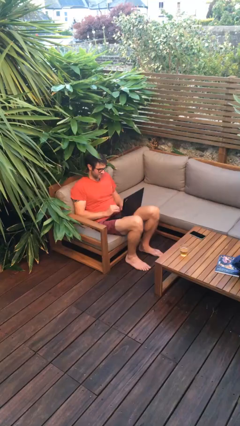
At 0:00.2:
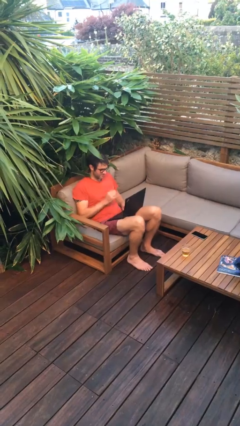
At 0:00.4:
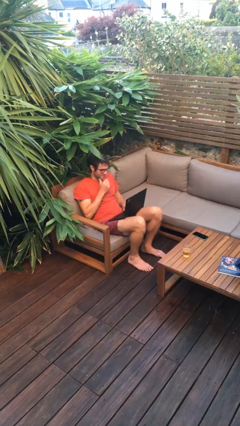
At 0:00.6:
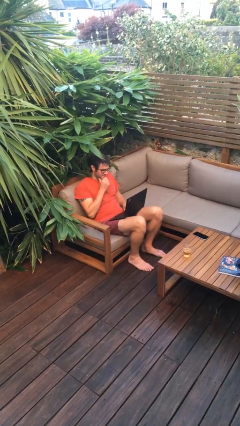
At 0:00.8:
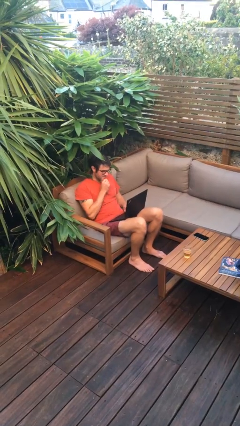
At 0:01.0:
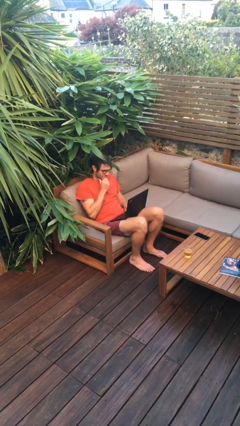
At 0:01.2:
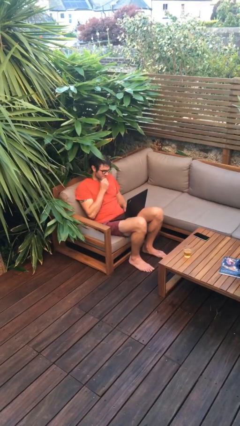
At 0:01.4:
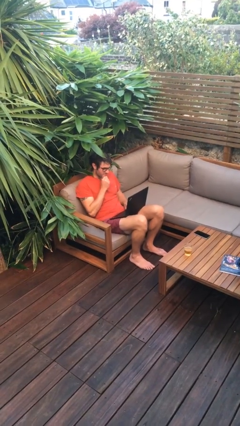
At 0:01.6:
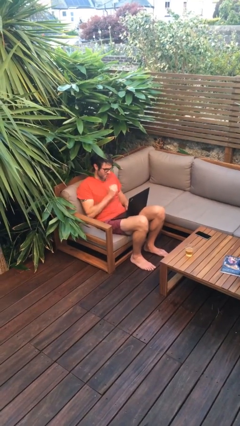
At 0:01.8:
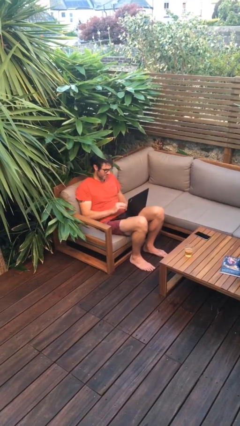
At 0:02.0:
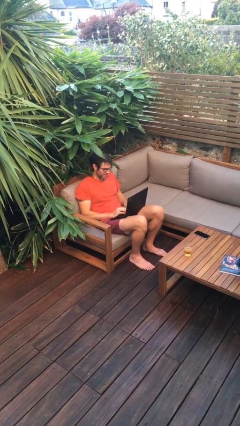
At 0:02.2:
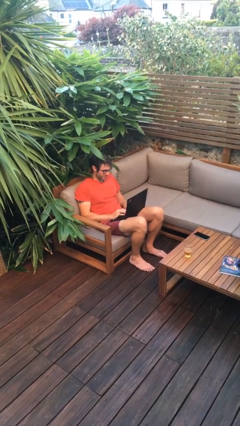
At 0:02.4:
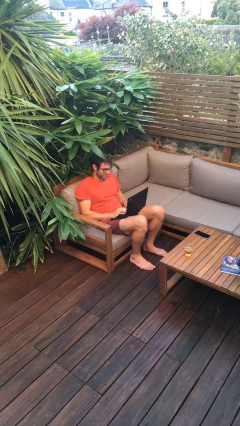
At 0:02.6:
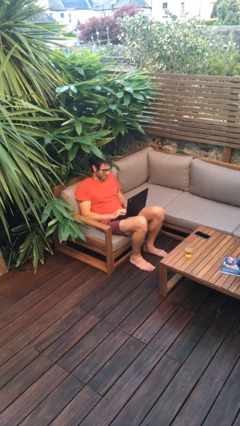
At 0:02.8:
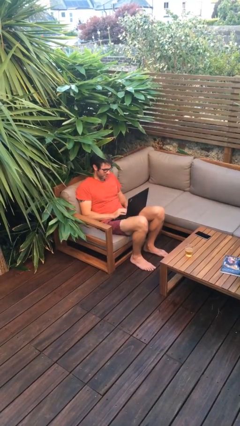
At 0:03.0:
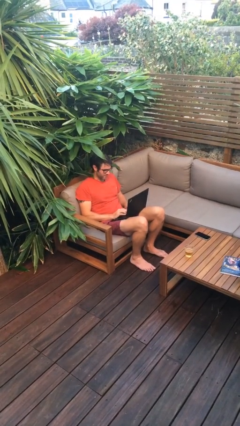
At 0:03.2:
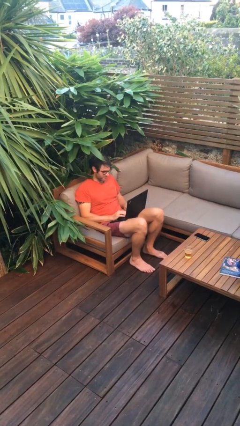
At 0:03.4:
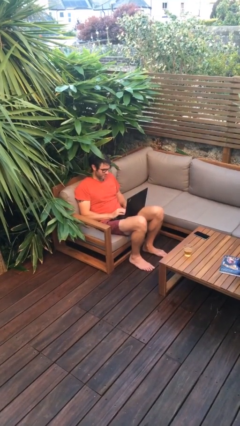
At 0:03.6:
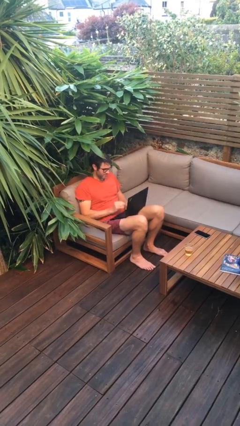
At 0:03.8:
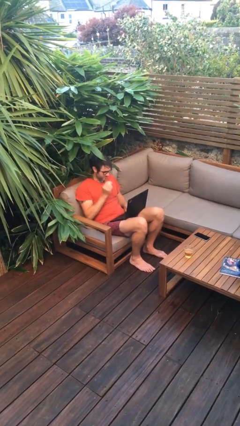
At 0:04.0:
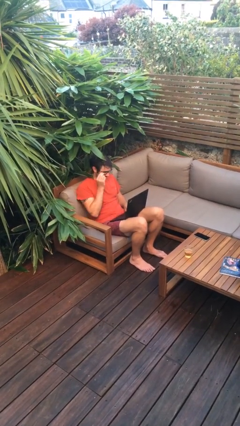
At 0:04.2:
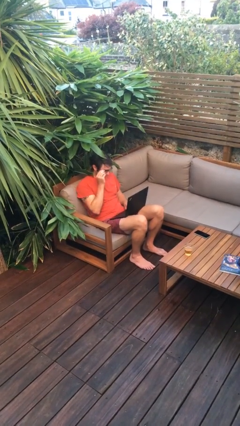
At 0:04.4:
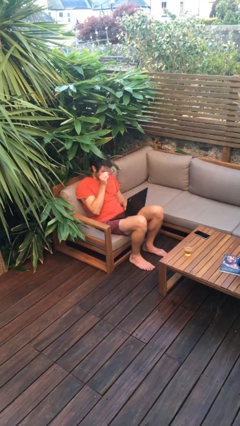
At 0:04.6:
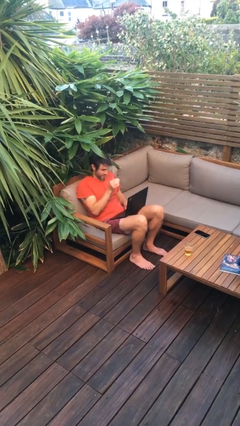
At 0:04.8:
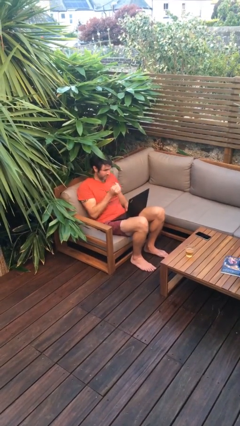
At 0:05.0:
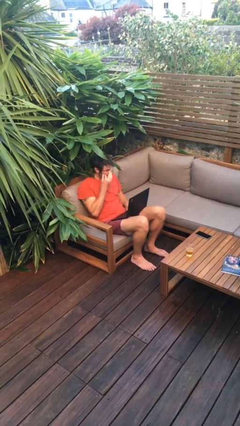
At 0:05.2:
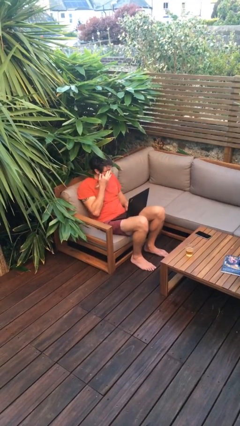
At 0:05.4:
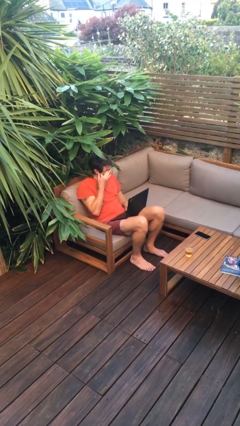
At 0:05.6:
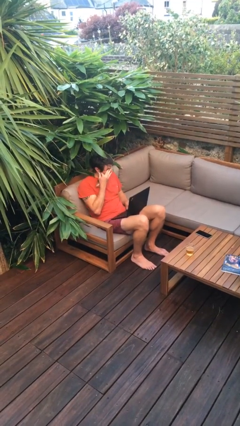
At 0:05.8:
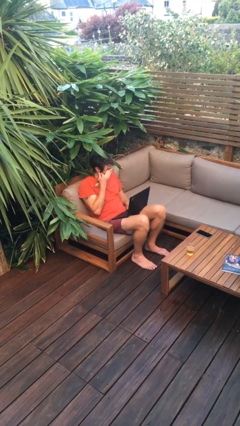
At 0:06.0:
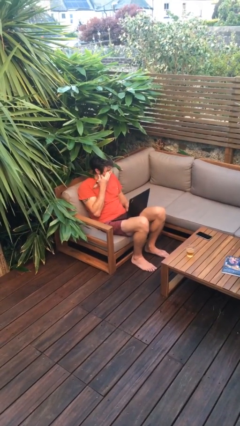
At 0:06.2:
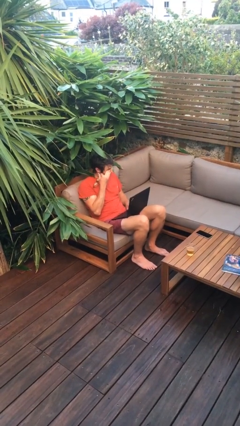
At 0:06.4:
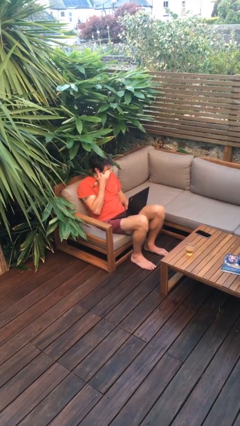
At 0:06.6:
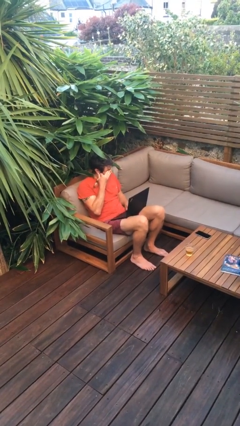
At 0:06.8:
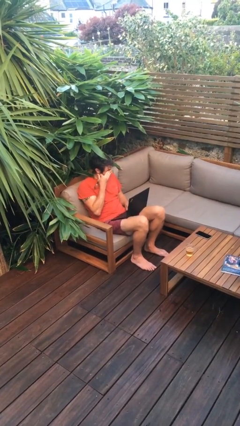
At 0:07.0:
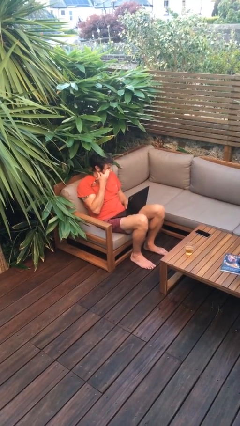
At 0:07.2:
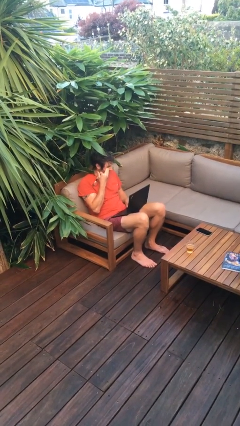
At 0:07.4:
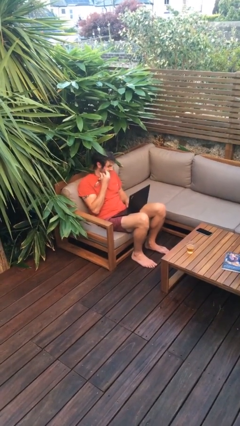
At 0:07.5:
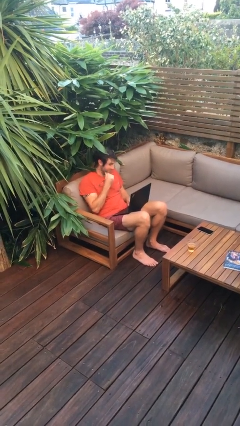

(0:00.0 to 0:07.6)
person interacts with laptop

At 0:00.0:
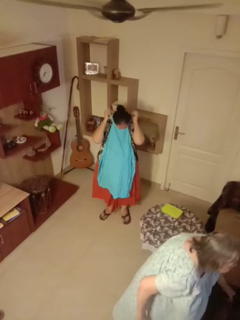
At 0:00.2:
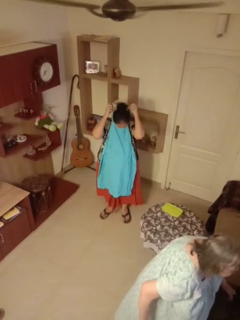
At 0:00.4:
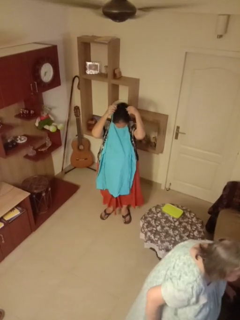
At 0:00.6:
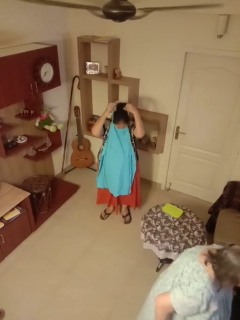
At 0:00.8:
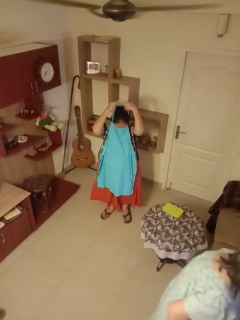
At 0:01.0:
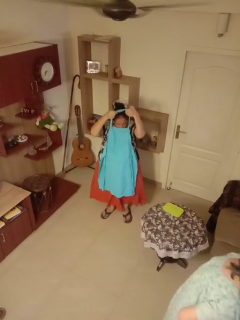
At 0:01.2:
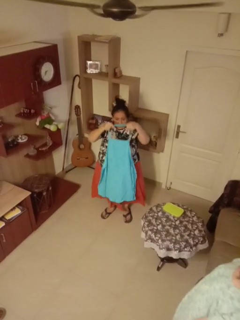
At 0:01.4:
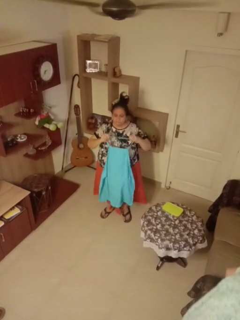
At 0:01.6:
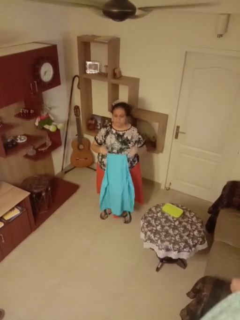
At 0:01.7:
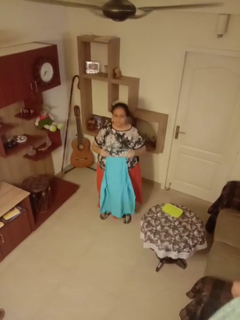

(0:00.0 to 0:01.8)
person takes off apron

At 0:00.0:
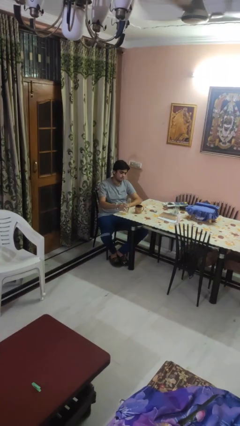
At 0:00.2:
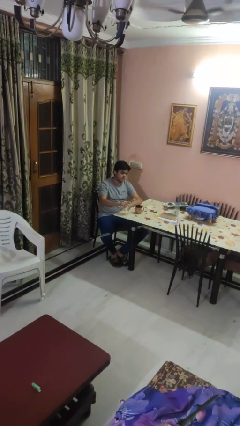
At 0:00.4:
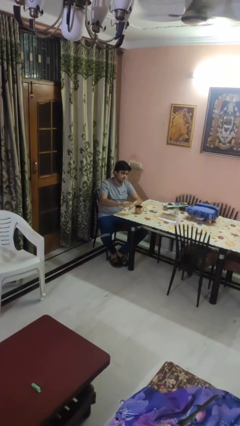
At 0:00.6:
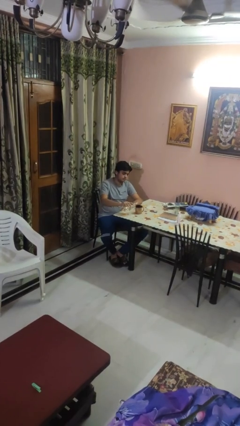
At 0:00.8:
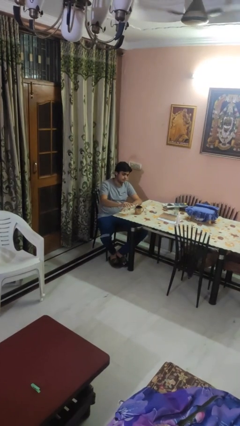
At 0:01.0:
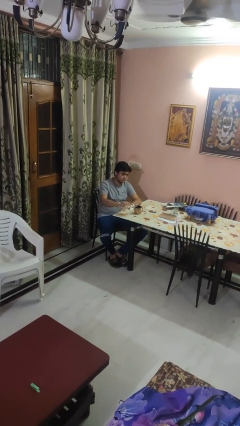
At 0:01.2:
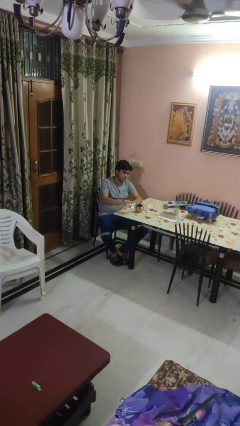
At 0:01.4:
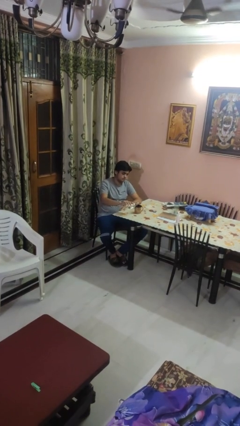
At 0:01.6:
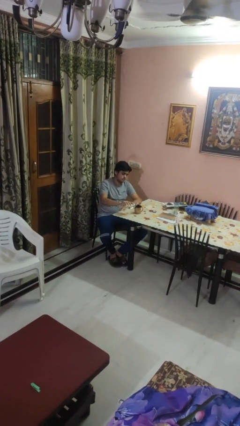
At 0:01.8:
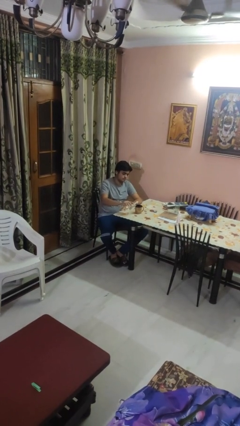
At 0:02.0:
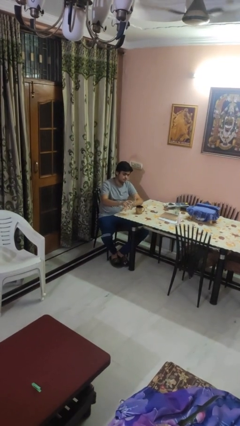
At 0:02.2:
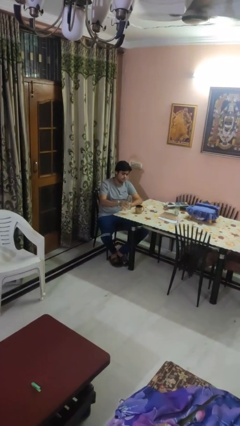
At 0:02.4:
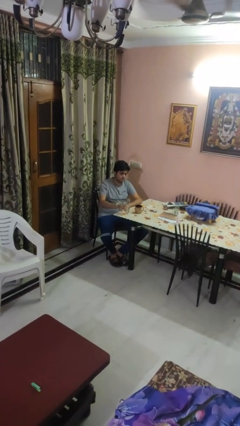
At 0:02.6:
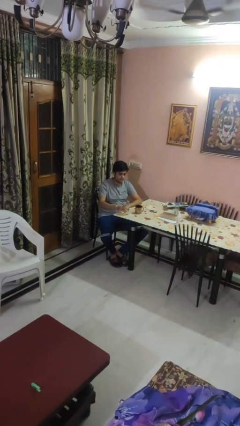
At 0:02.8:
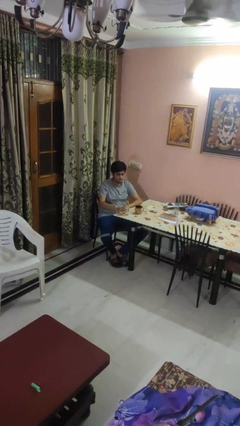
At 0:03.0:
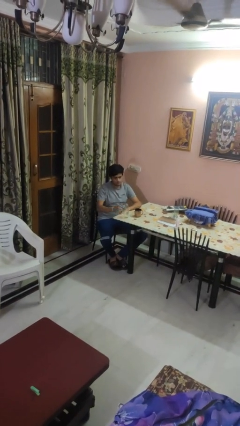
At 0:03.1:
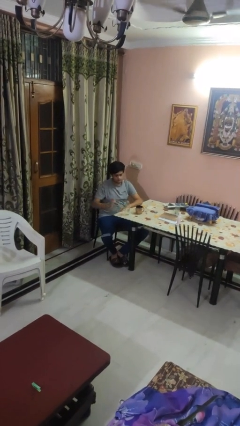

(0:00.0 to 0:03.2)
person pours liquid into cup

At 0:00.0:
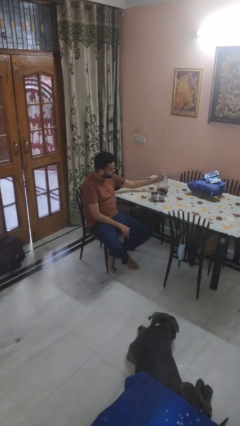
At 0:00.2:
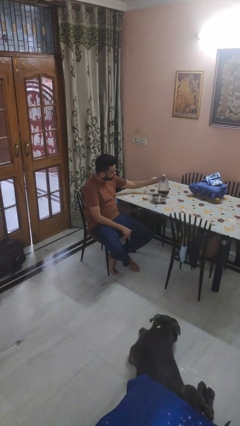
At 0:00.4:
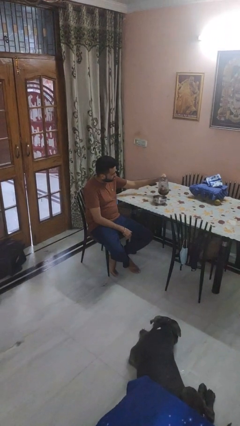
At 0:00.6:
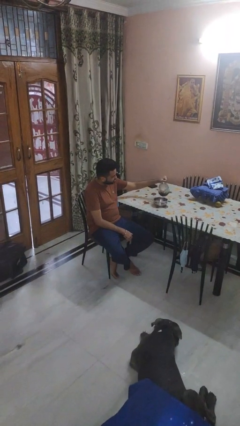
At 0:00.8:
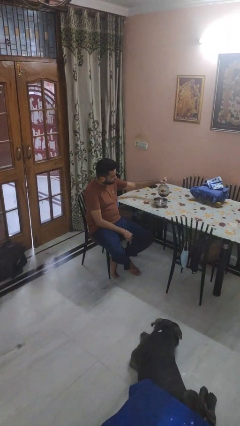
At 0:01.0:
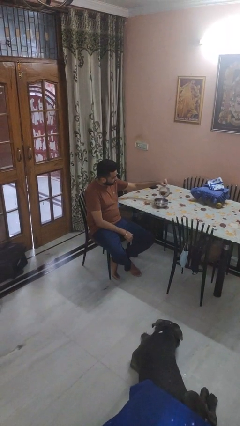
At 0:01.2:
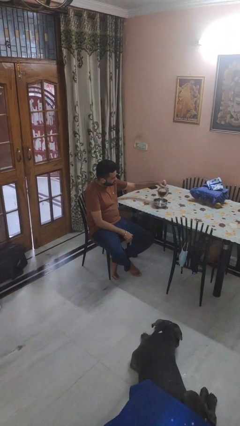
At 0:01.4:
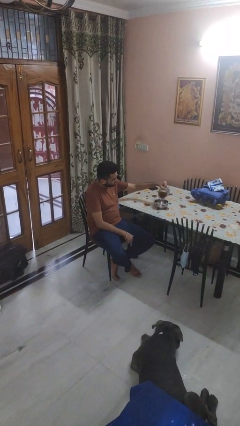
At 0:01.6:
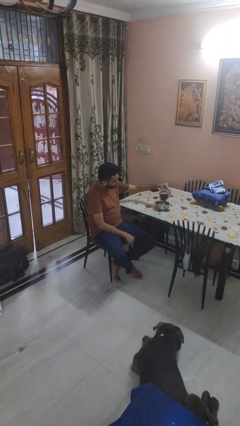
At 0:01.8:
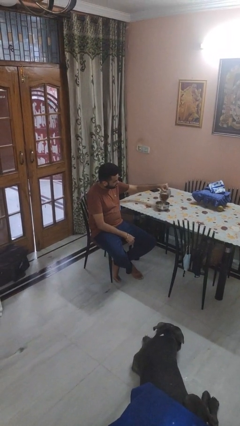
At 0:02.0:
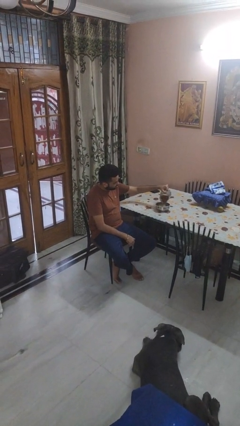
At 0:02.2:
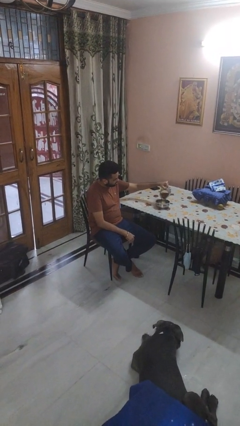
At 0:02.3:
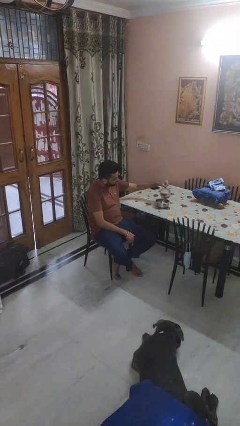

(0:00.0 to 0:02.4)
person pours into bowl

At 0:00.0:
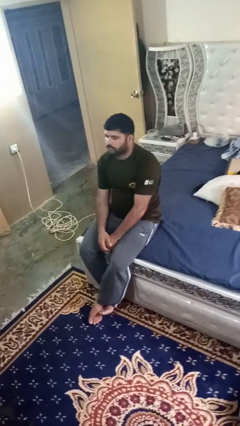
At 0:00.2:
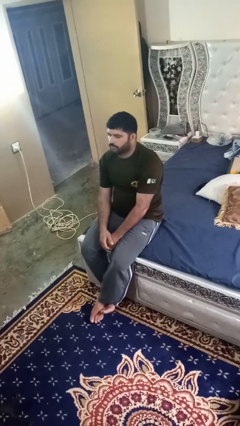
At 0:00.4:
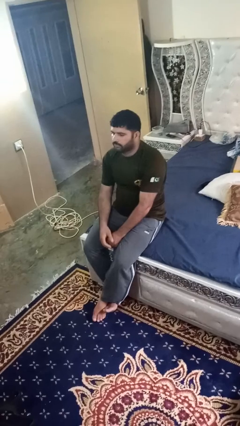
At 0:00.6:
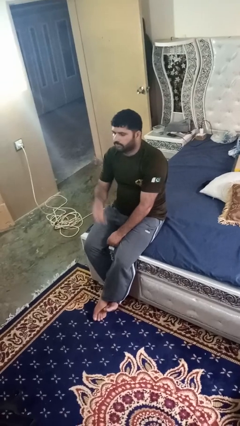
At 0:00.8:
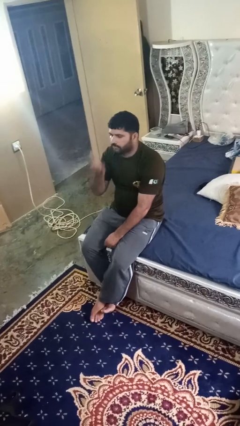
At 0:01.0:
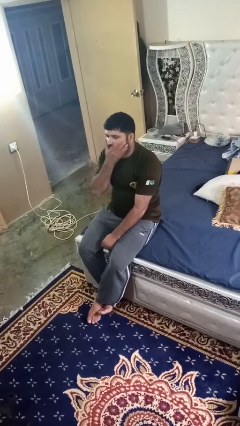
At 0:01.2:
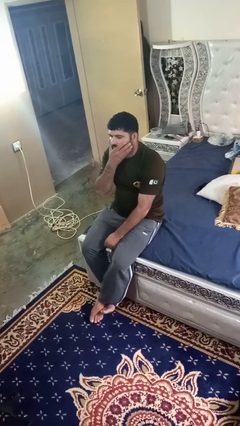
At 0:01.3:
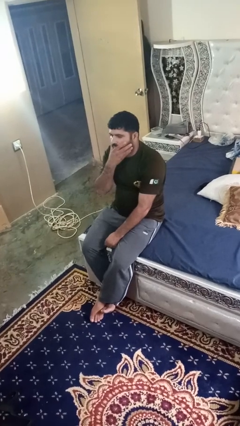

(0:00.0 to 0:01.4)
person strokes chin

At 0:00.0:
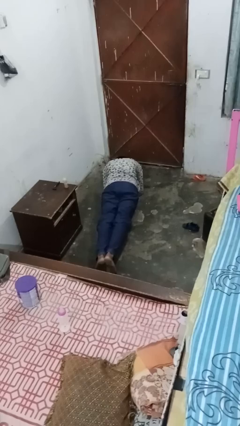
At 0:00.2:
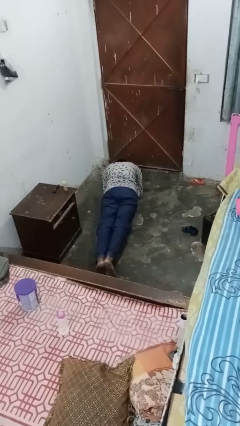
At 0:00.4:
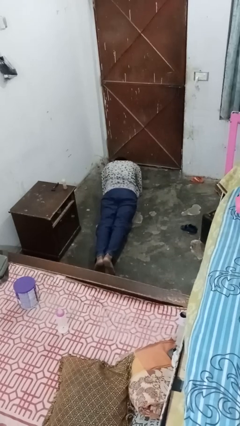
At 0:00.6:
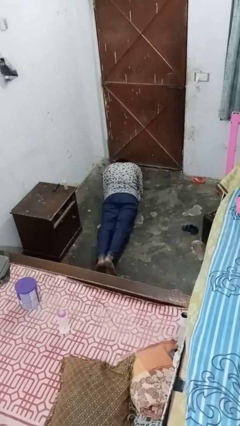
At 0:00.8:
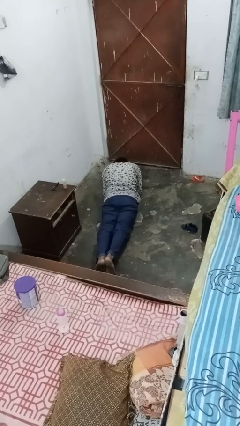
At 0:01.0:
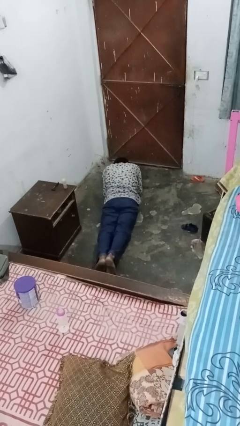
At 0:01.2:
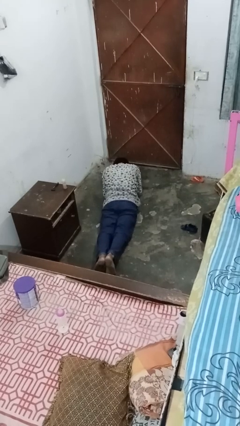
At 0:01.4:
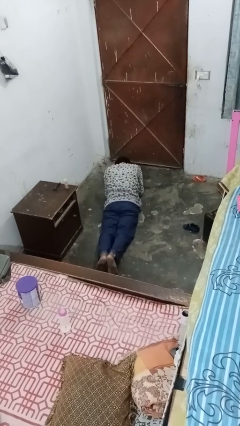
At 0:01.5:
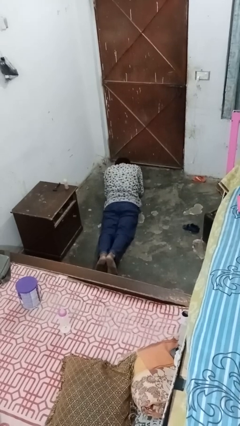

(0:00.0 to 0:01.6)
person stands up from floor
